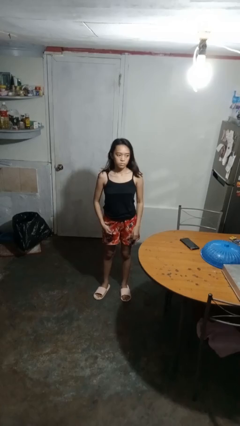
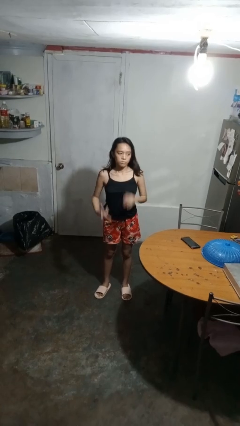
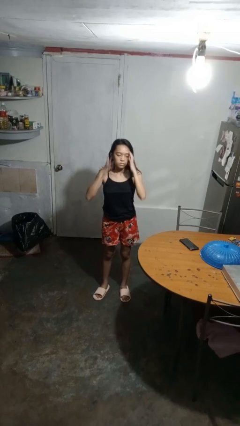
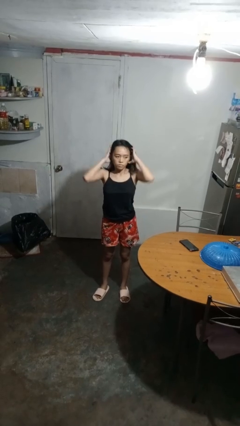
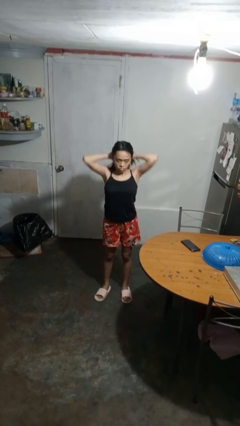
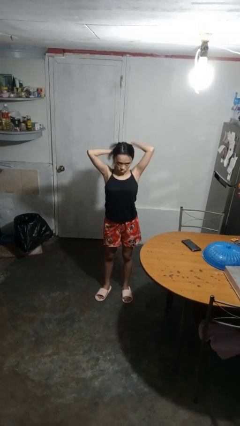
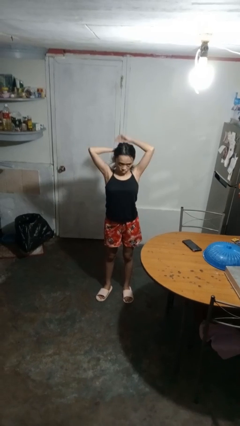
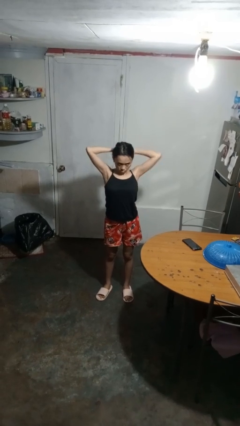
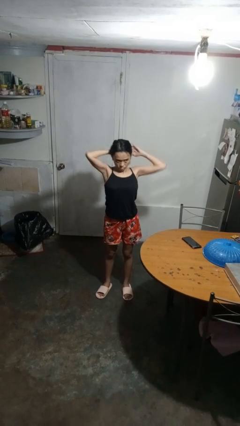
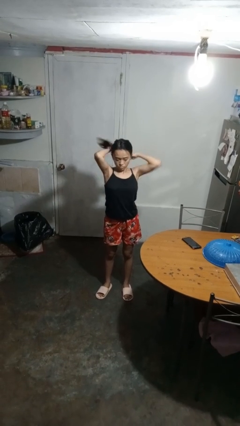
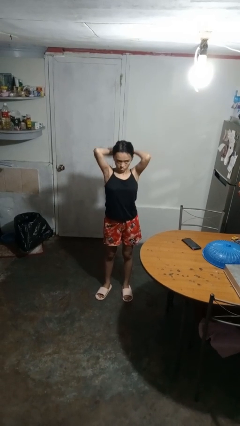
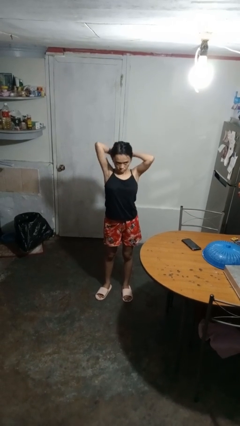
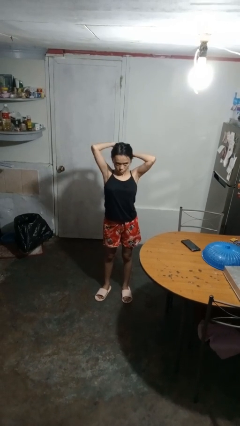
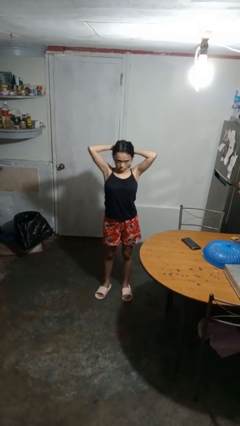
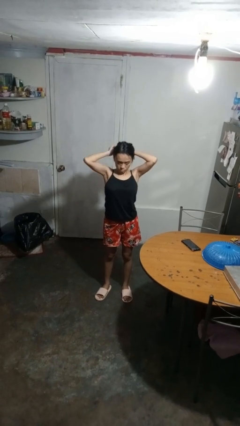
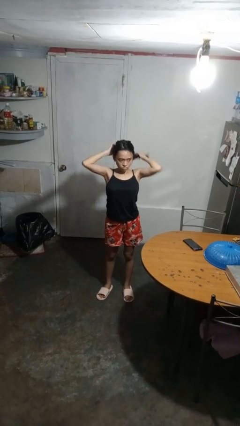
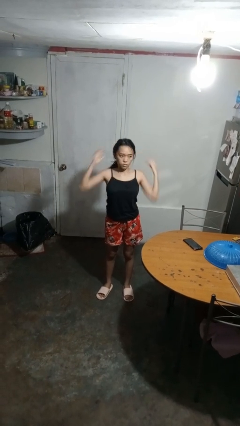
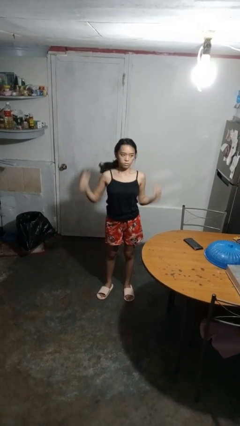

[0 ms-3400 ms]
person puts hair in ponytail

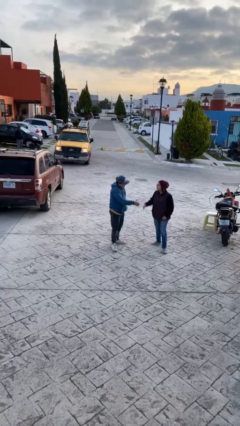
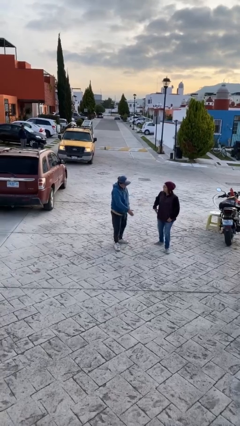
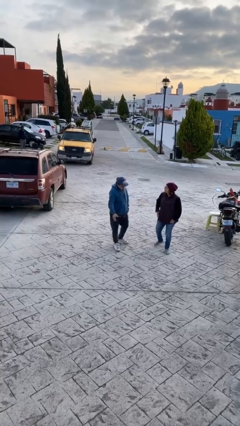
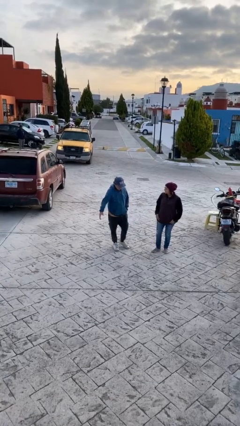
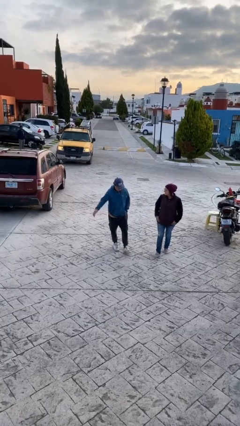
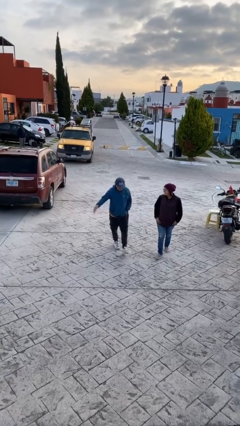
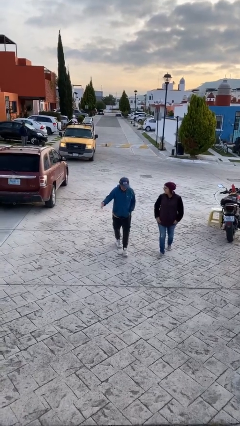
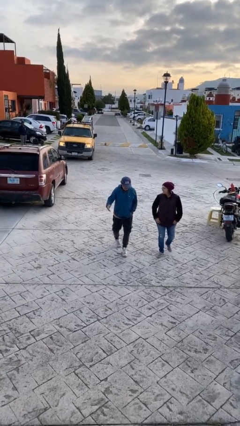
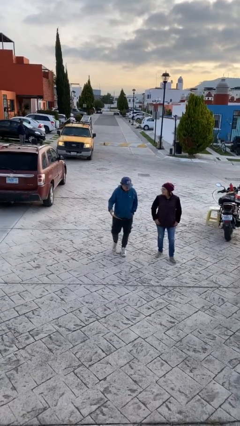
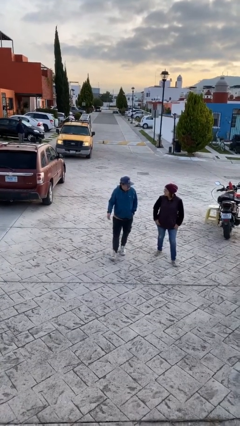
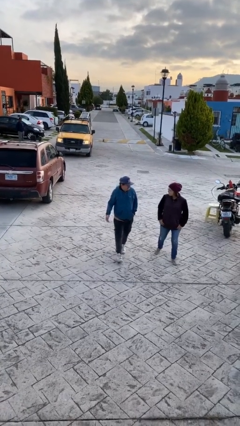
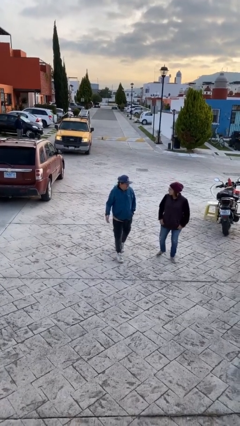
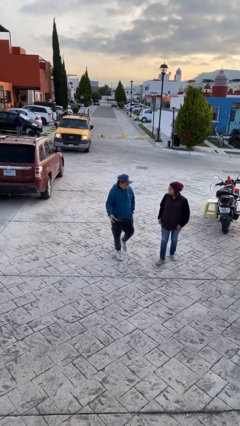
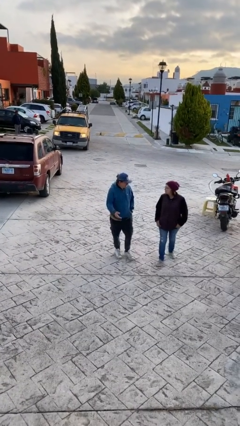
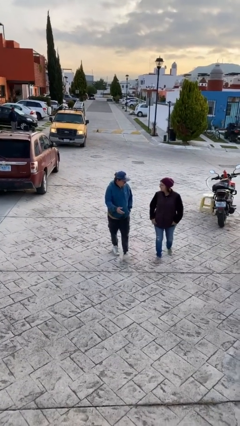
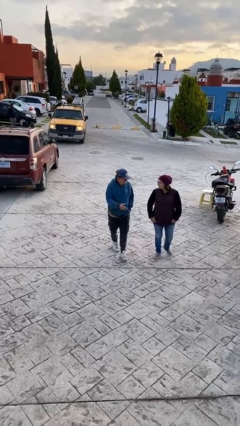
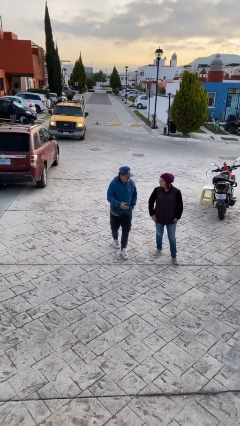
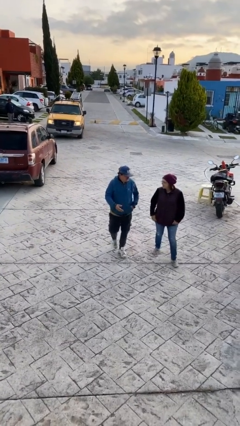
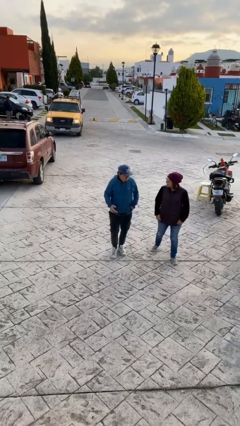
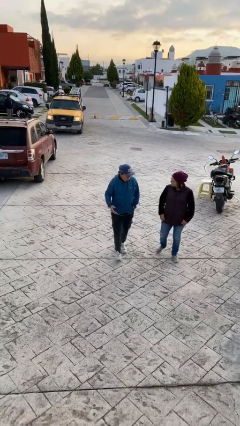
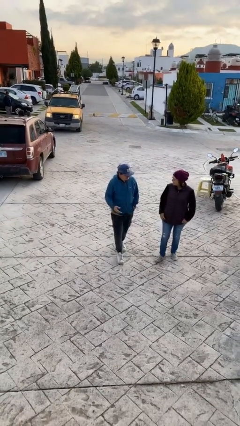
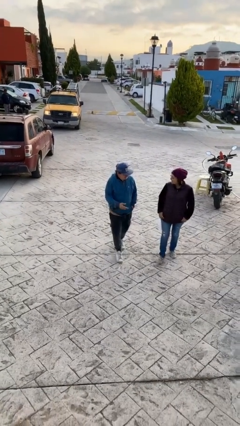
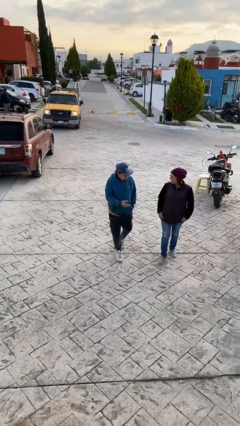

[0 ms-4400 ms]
person talks to person

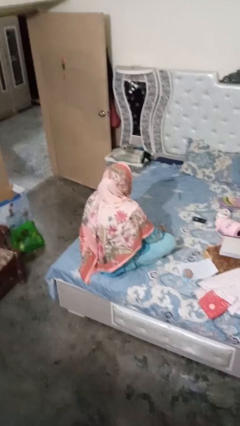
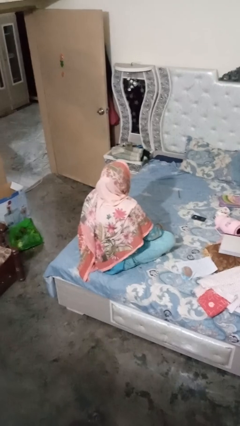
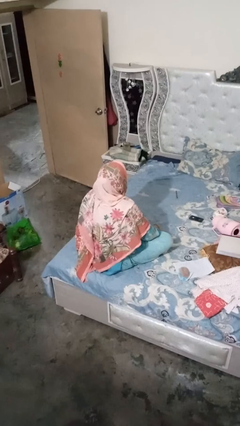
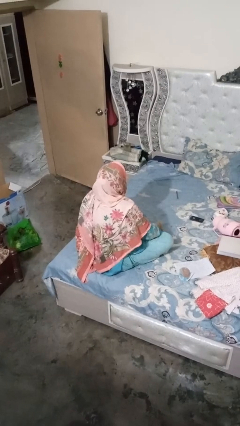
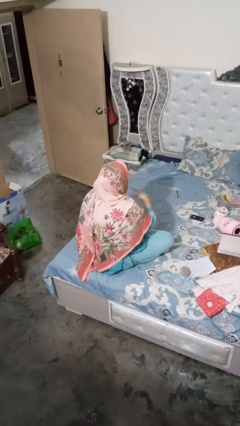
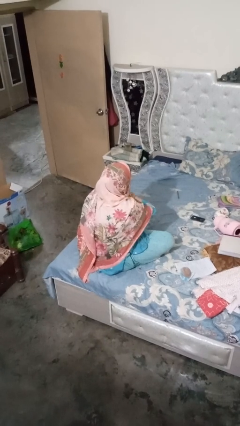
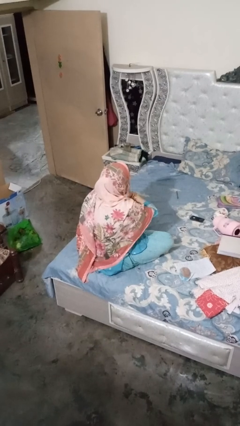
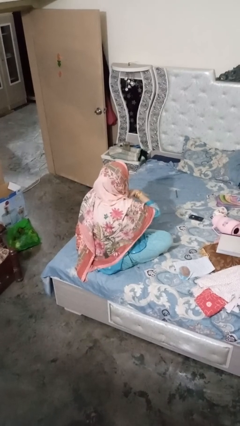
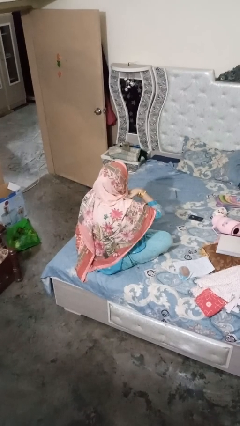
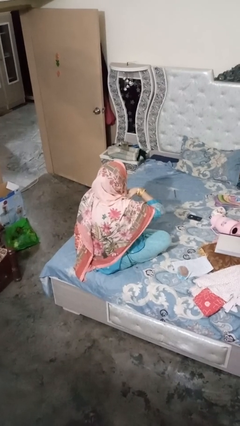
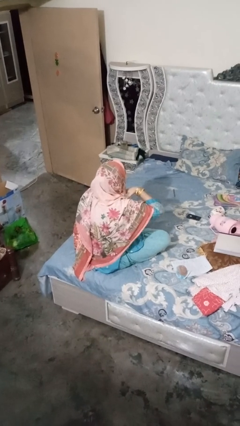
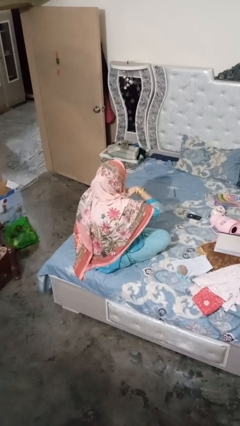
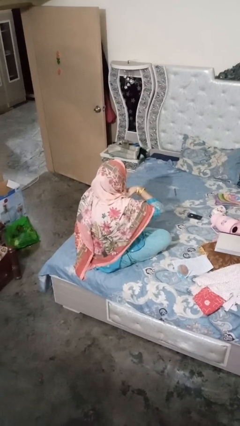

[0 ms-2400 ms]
person gestures cut

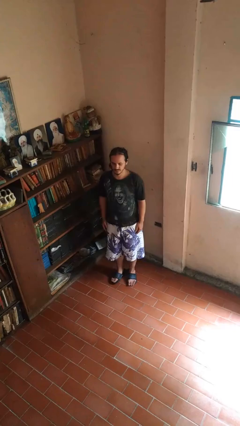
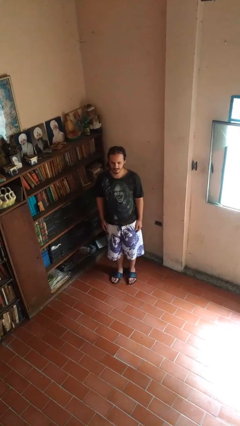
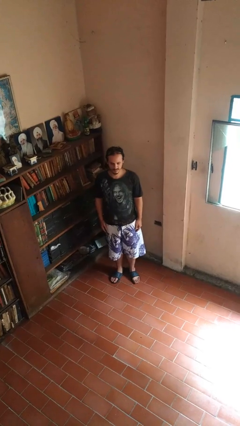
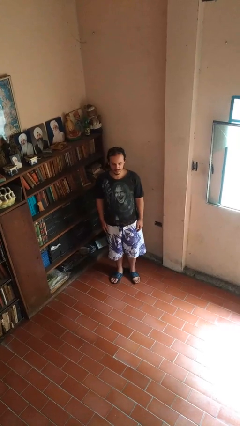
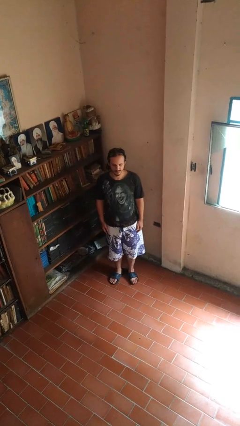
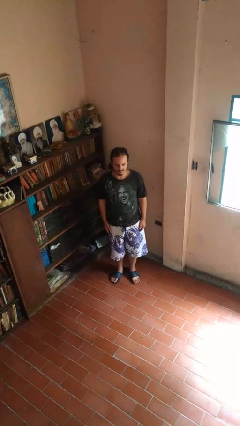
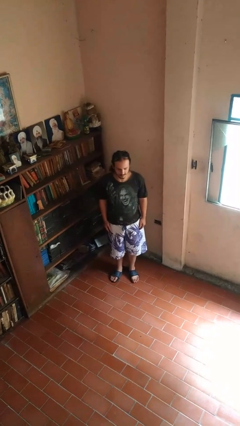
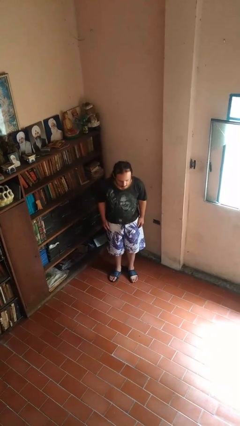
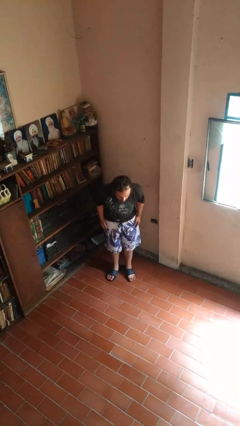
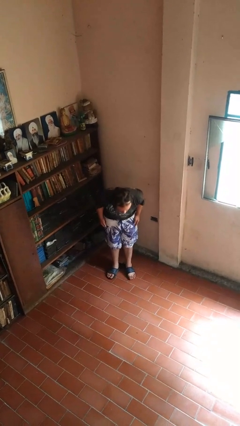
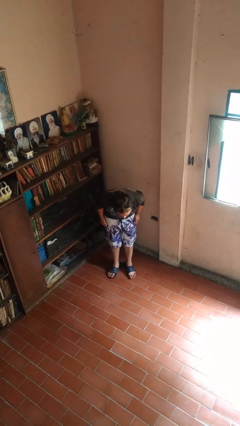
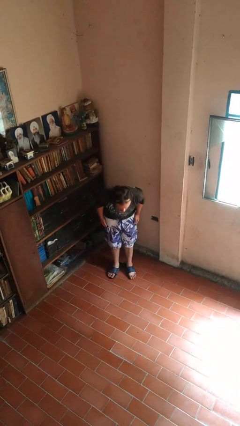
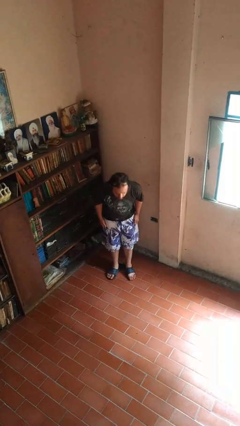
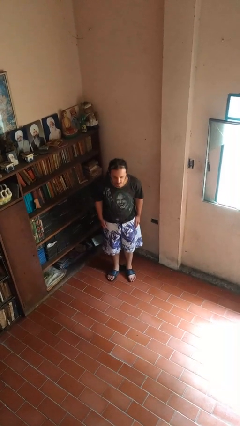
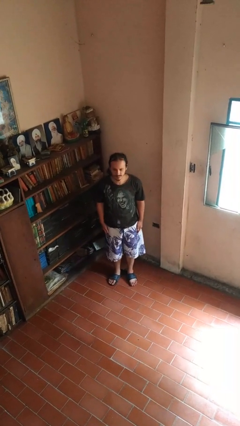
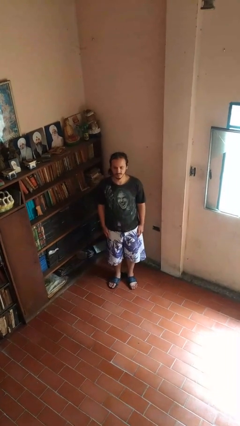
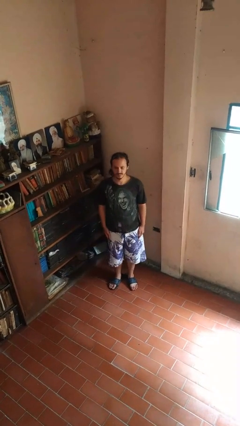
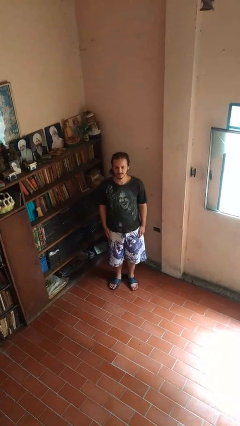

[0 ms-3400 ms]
person bows

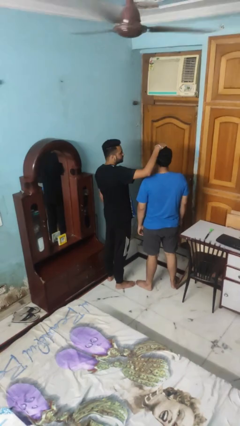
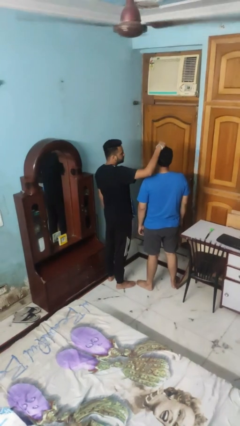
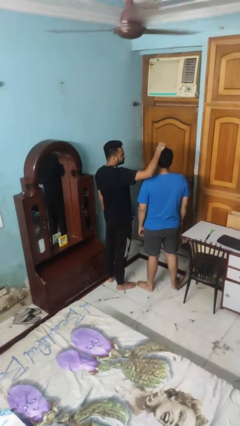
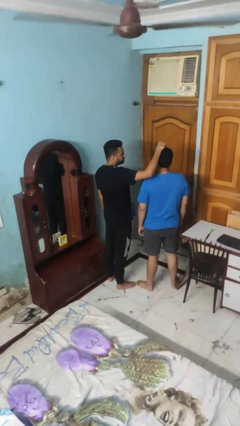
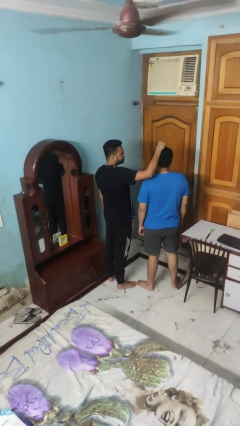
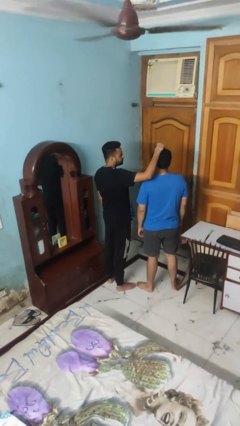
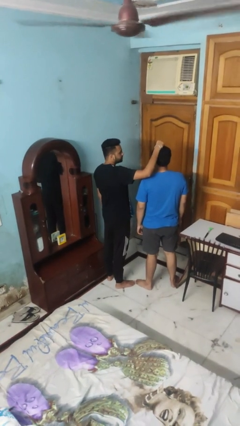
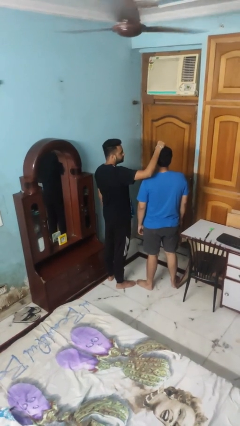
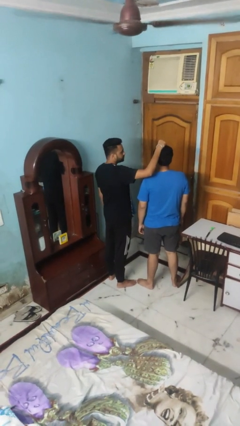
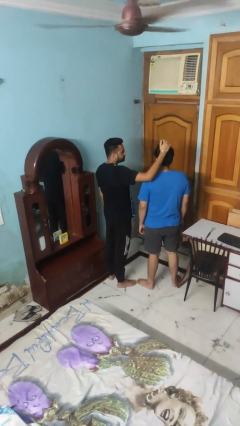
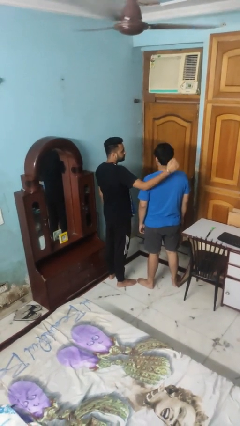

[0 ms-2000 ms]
person grabs person by hair

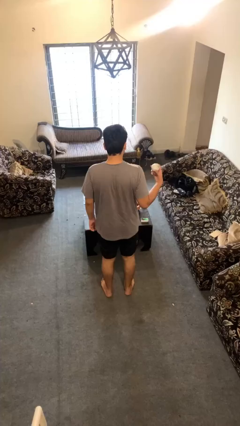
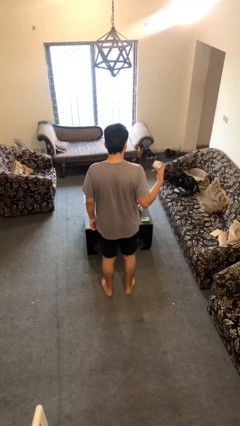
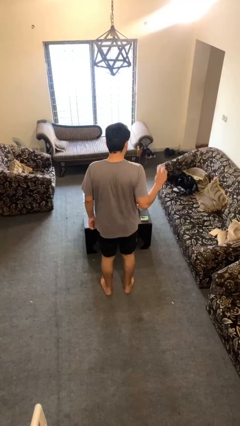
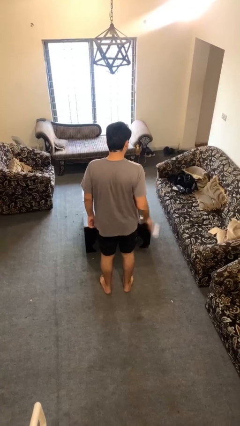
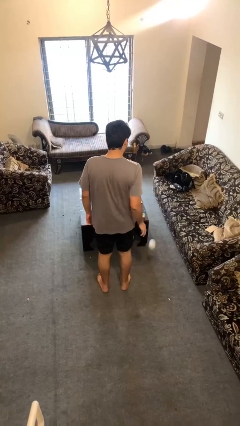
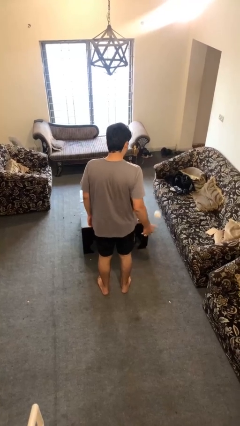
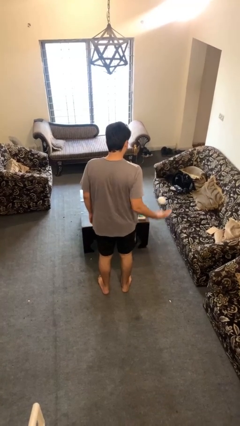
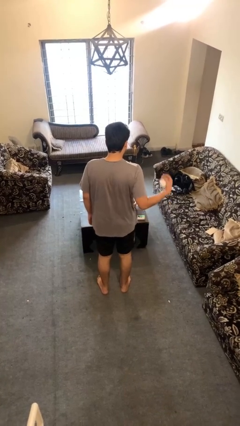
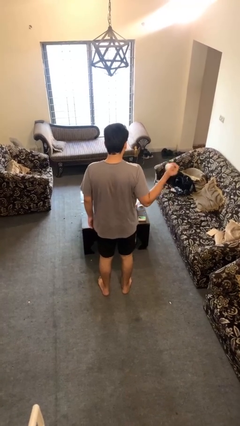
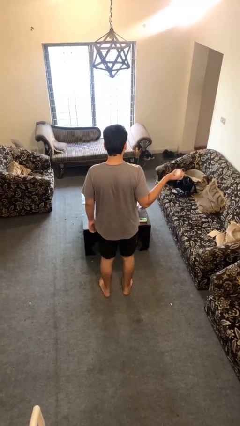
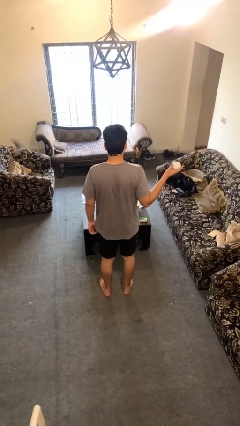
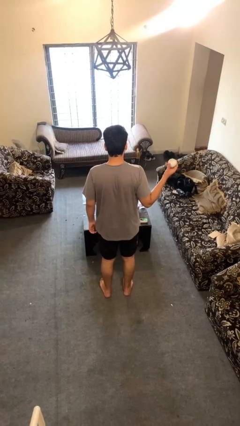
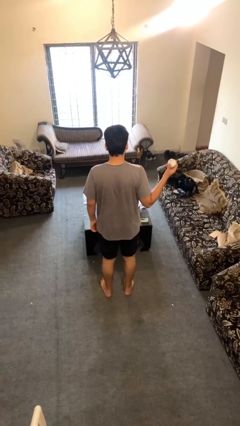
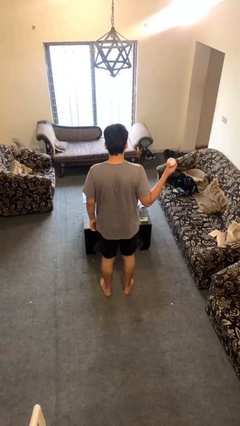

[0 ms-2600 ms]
person bounces ball on floor
